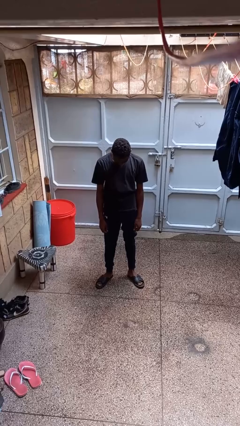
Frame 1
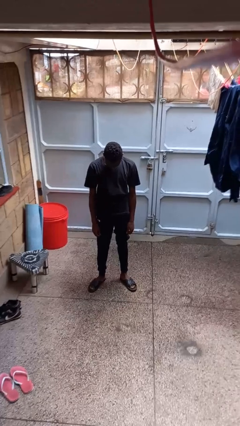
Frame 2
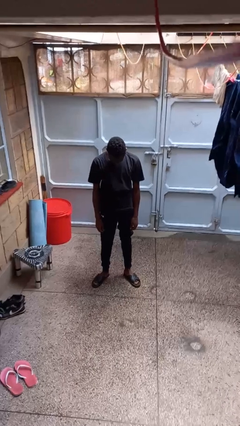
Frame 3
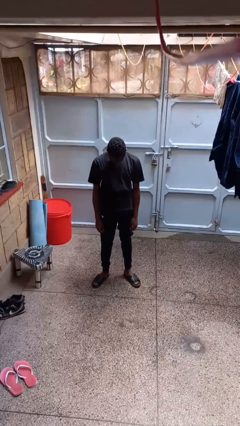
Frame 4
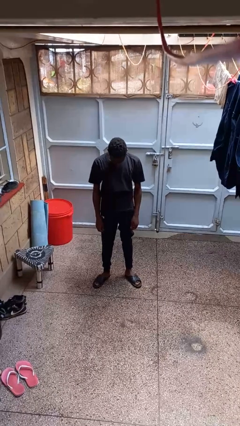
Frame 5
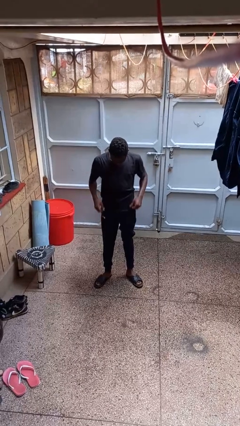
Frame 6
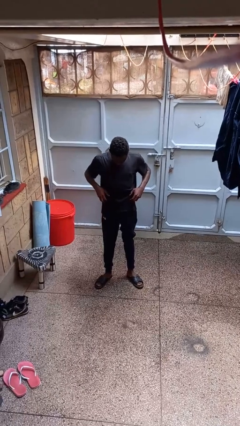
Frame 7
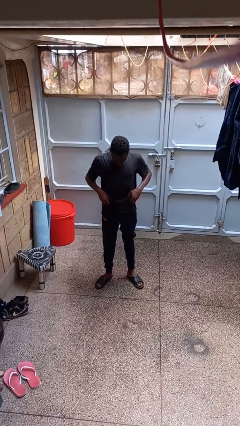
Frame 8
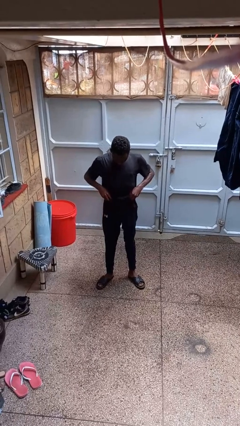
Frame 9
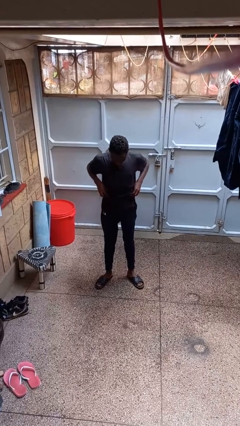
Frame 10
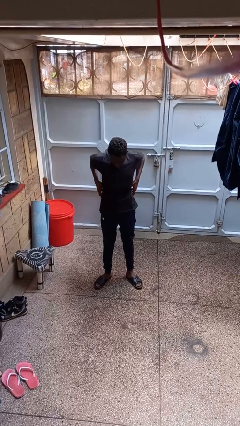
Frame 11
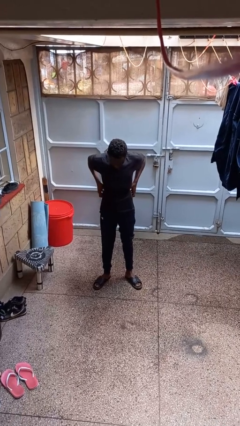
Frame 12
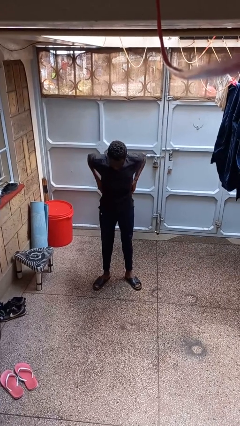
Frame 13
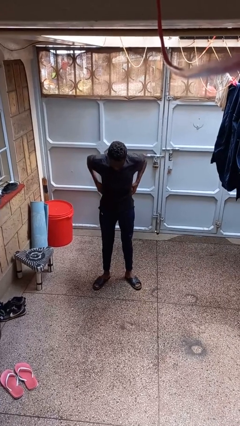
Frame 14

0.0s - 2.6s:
person hikes up pants

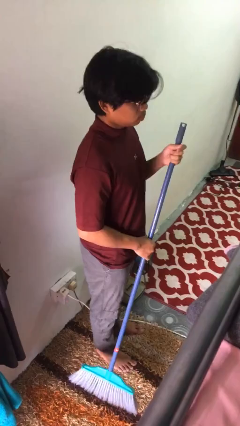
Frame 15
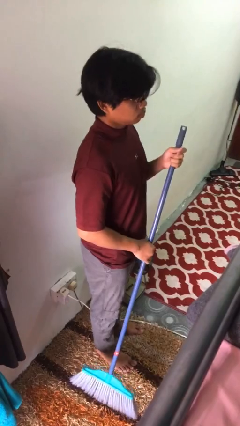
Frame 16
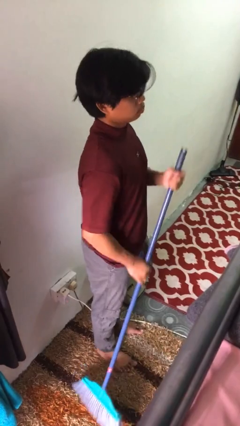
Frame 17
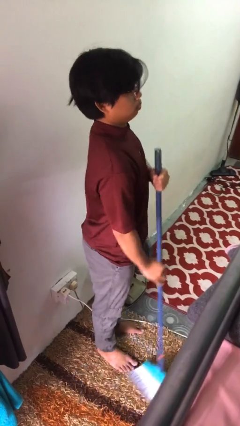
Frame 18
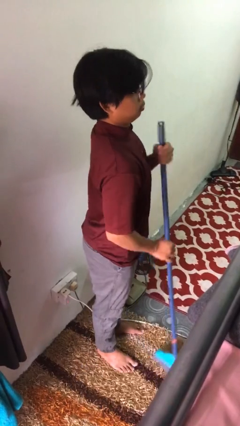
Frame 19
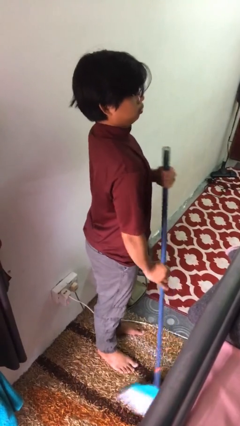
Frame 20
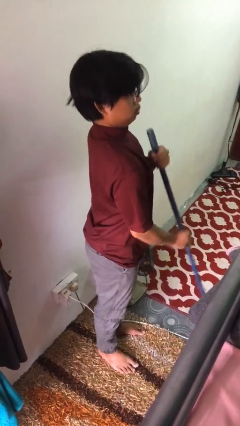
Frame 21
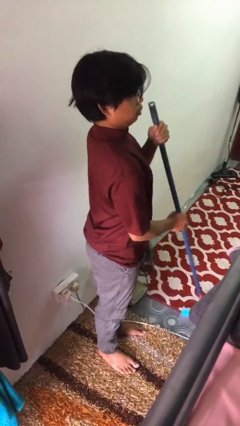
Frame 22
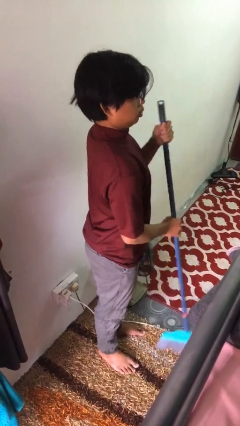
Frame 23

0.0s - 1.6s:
person sweeps floor

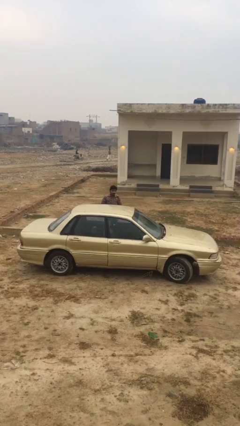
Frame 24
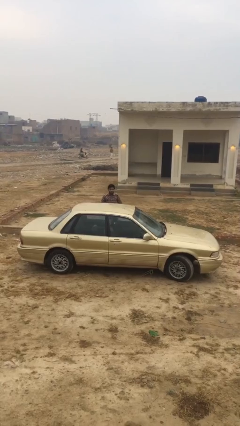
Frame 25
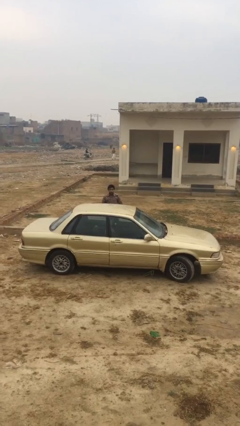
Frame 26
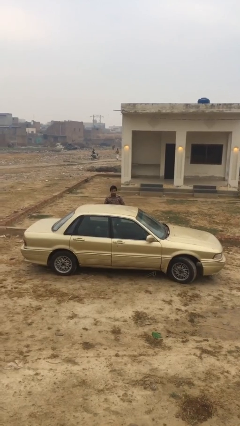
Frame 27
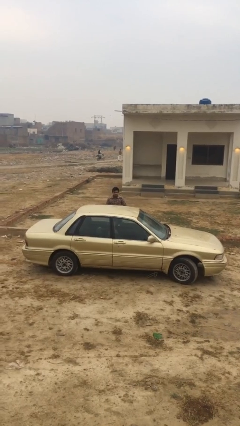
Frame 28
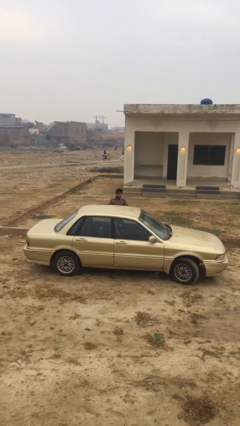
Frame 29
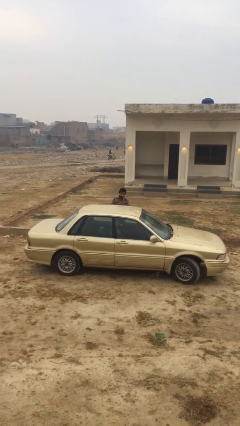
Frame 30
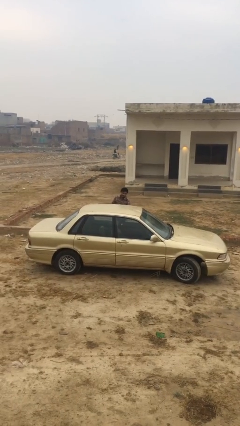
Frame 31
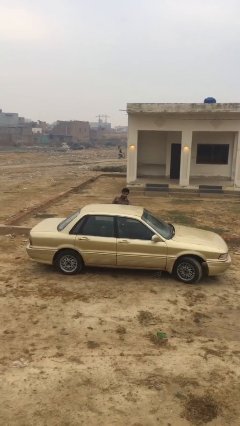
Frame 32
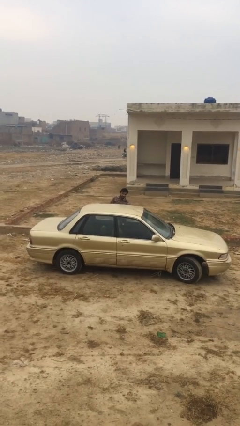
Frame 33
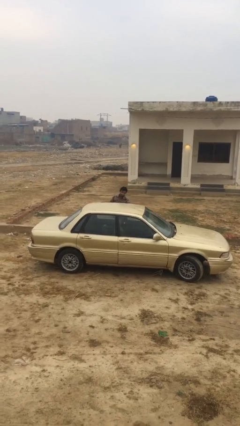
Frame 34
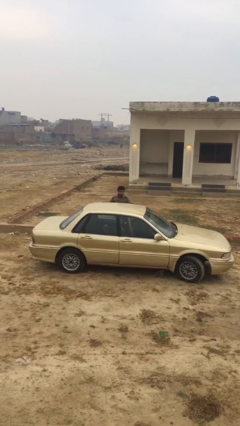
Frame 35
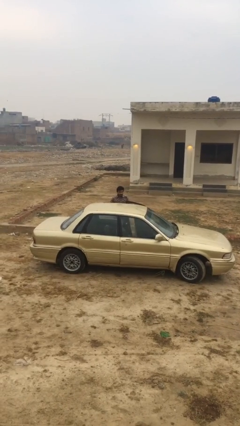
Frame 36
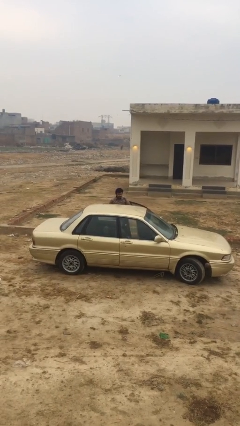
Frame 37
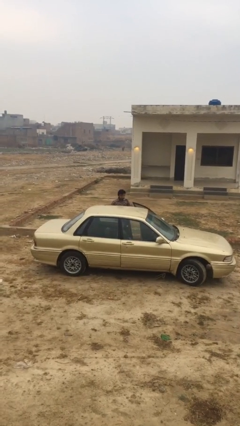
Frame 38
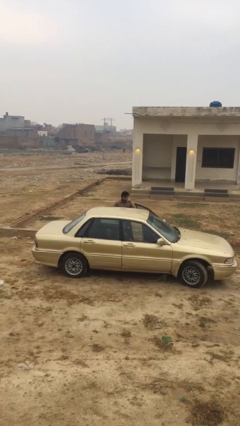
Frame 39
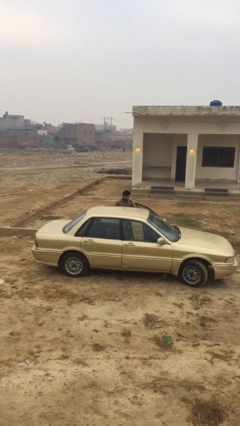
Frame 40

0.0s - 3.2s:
person opens car door

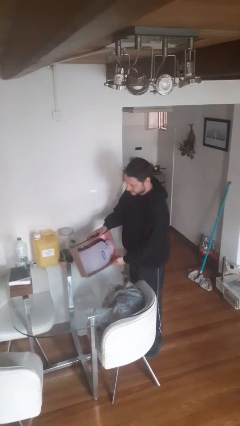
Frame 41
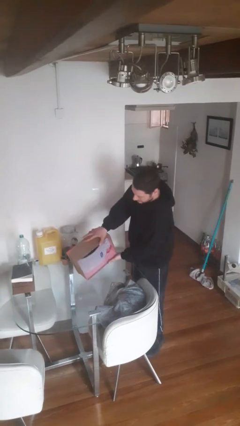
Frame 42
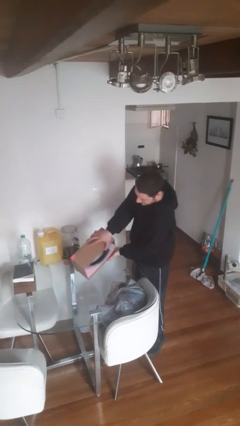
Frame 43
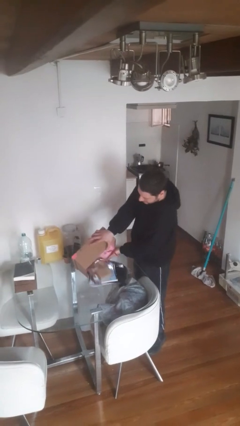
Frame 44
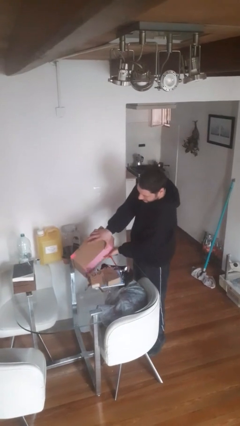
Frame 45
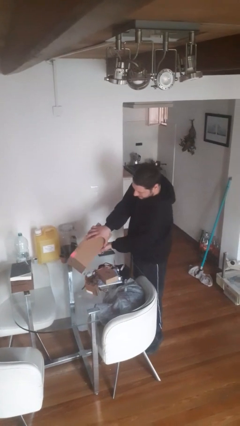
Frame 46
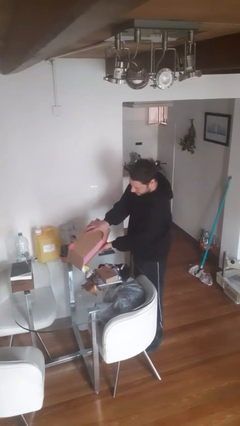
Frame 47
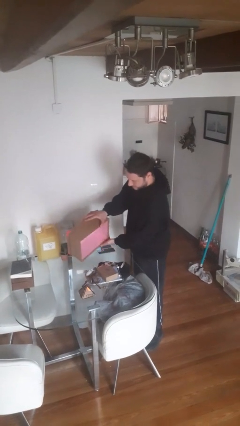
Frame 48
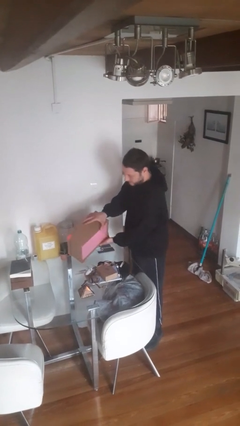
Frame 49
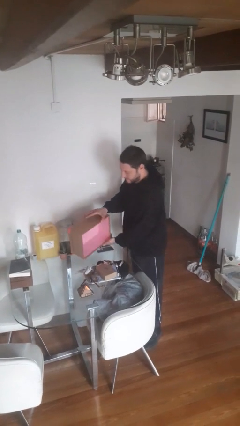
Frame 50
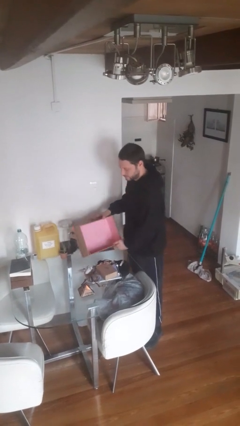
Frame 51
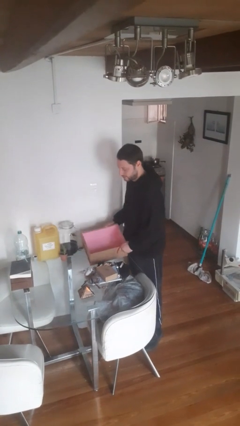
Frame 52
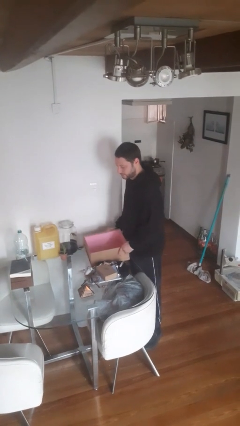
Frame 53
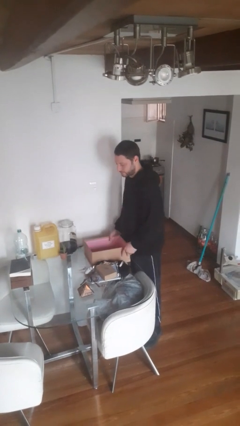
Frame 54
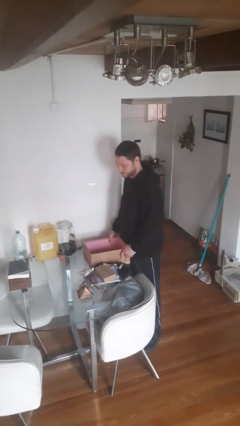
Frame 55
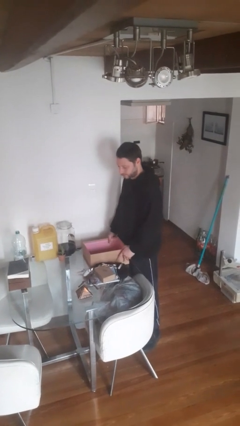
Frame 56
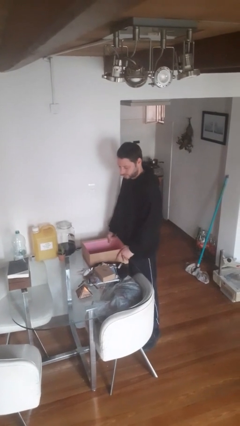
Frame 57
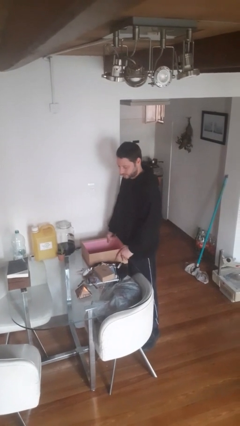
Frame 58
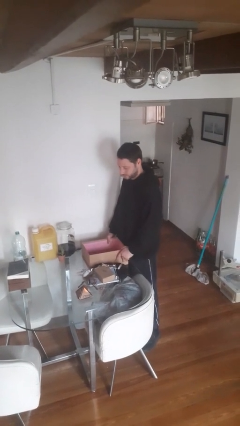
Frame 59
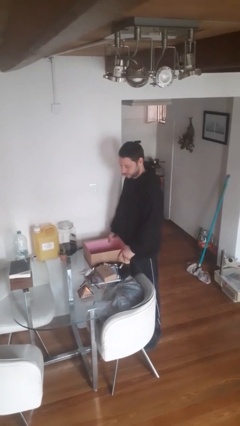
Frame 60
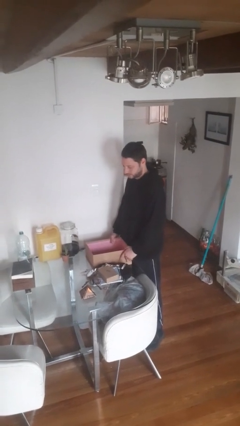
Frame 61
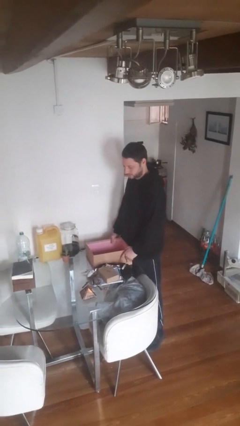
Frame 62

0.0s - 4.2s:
person unloads box onto table

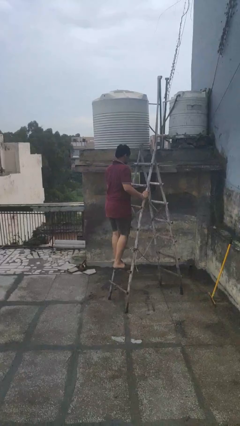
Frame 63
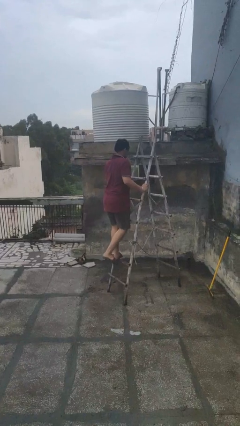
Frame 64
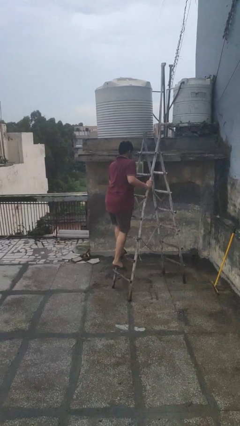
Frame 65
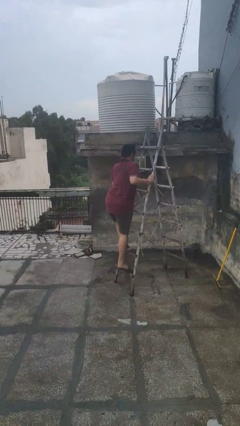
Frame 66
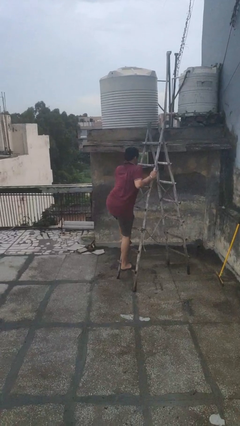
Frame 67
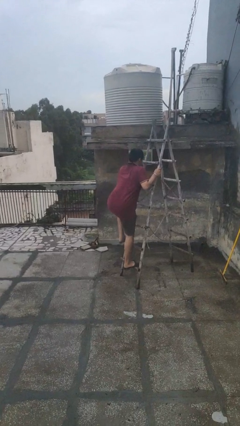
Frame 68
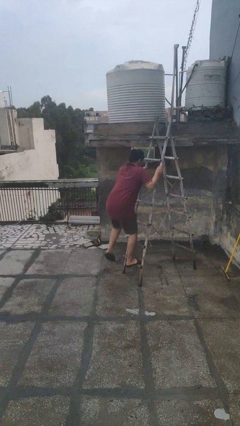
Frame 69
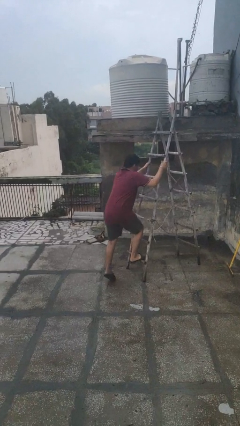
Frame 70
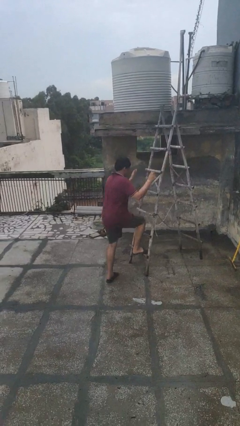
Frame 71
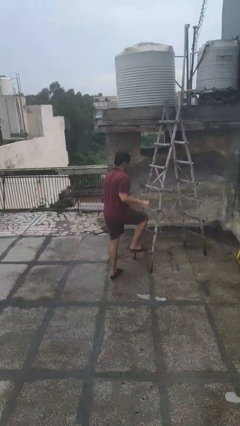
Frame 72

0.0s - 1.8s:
person climbs down ladder

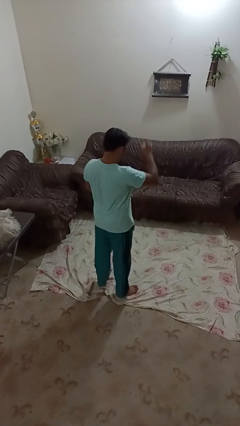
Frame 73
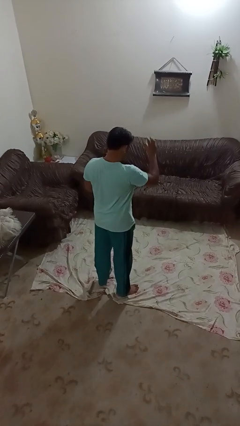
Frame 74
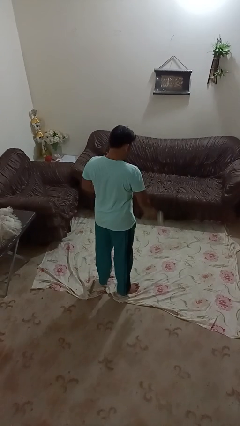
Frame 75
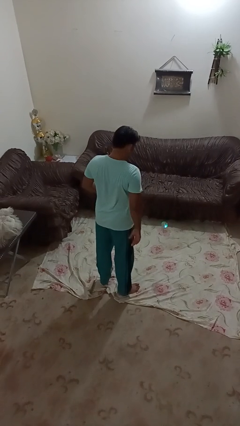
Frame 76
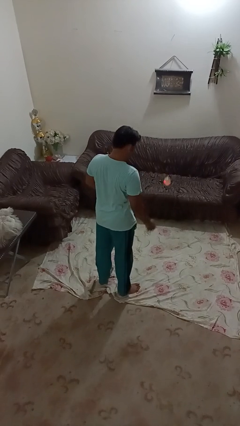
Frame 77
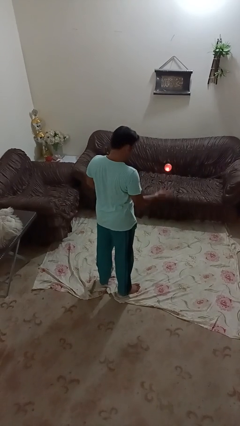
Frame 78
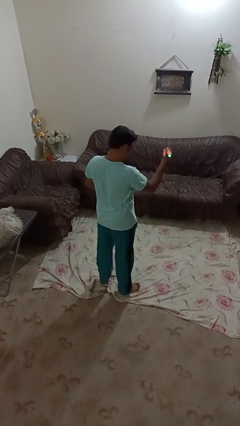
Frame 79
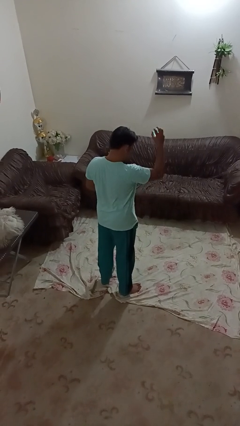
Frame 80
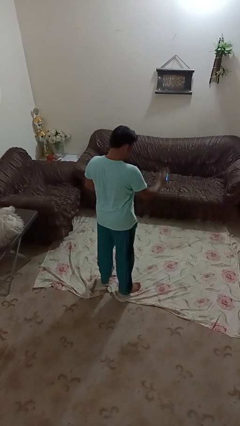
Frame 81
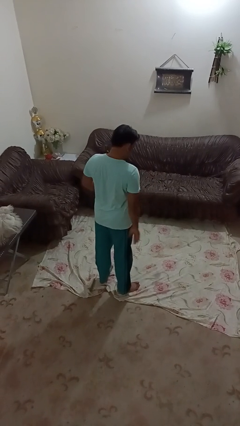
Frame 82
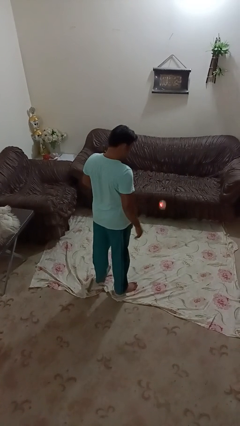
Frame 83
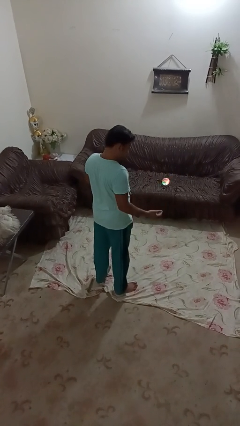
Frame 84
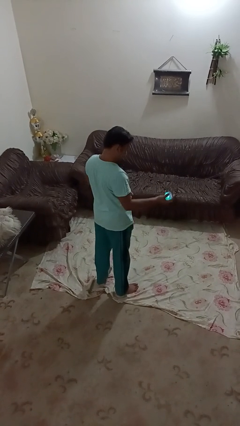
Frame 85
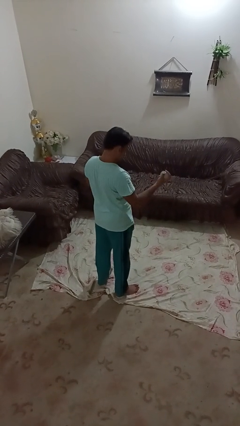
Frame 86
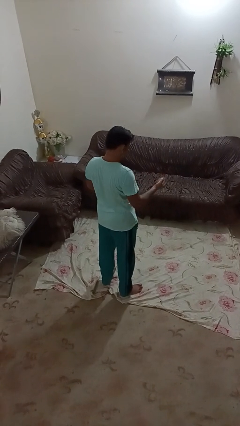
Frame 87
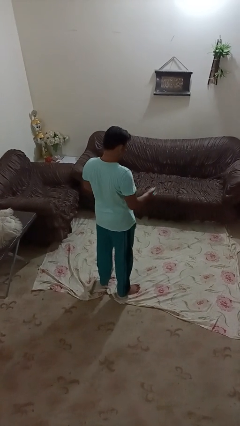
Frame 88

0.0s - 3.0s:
person bounces ball on floor

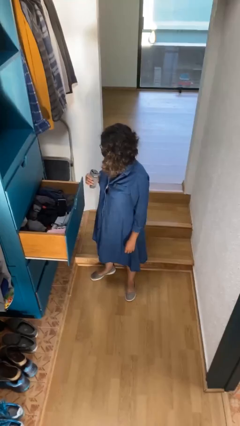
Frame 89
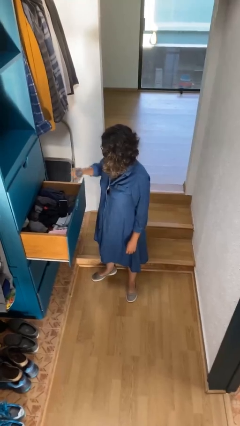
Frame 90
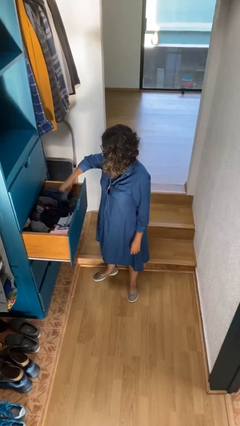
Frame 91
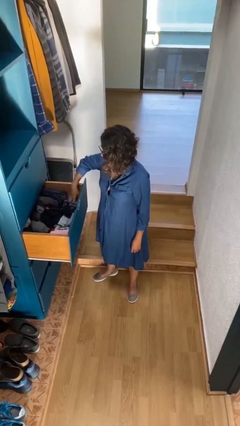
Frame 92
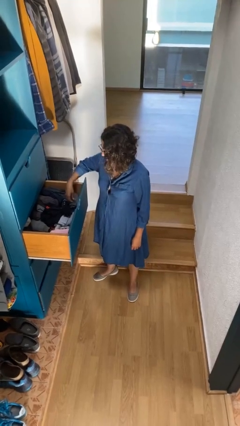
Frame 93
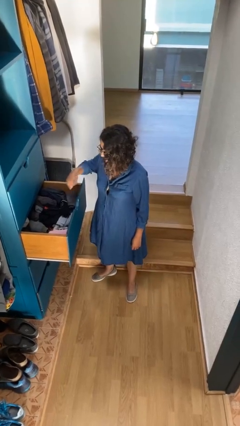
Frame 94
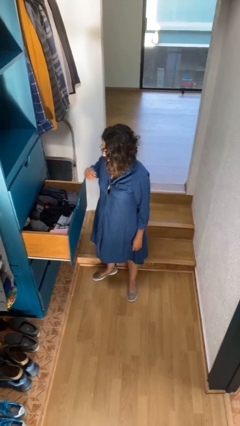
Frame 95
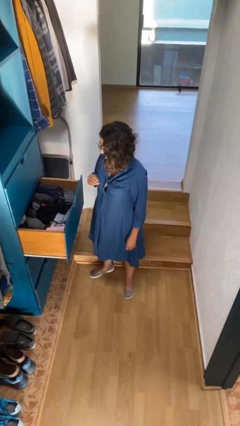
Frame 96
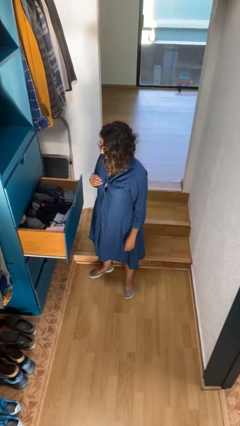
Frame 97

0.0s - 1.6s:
person puts clothes into dresser
